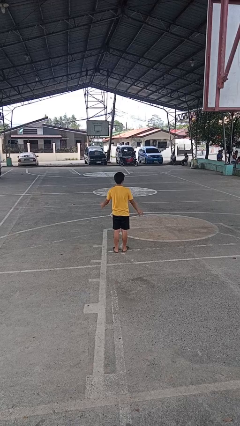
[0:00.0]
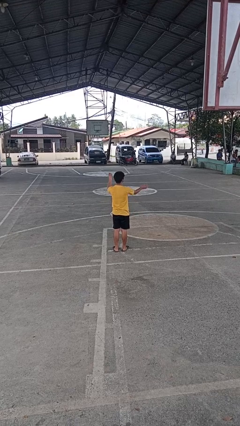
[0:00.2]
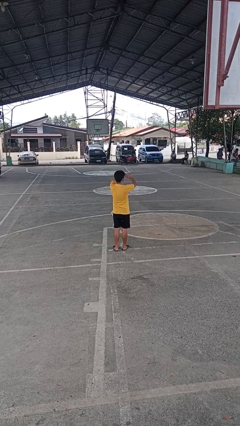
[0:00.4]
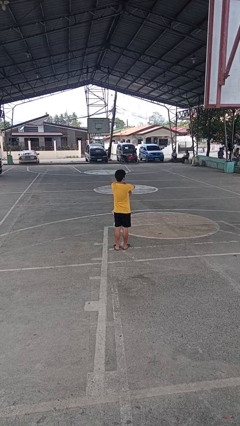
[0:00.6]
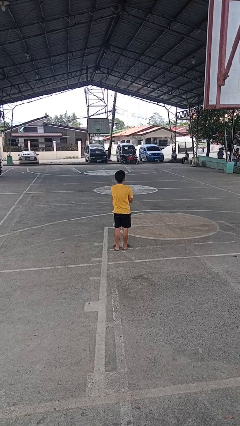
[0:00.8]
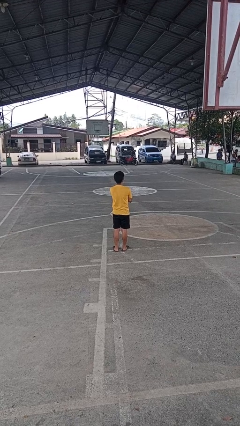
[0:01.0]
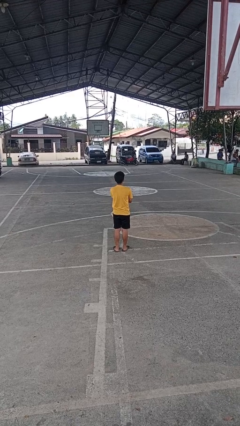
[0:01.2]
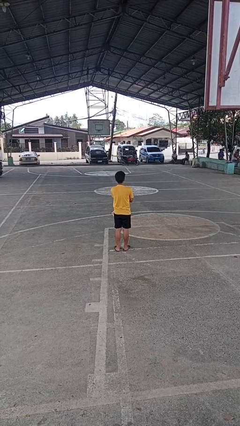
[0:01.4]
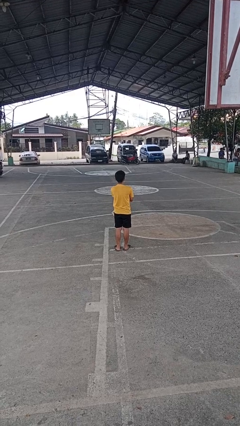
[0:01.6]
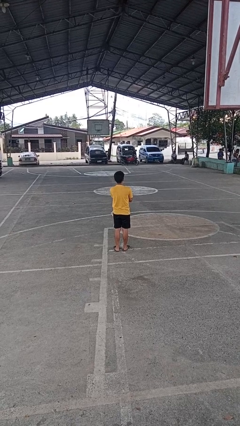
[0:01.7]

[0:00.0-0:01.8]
person crosses arms

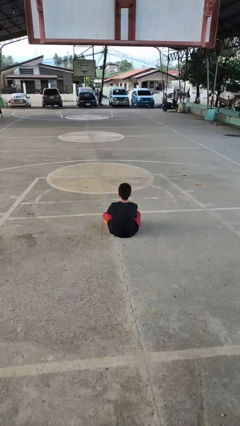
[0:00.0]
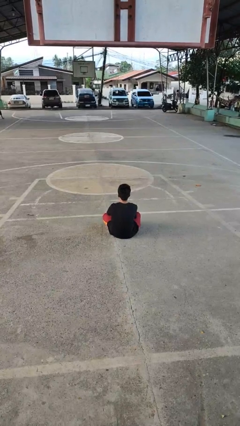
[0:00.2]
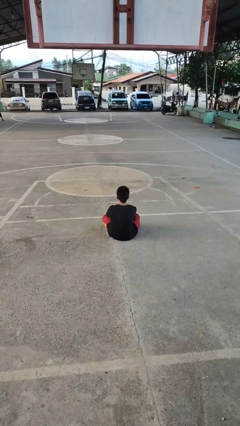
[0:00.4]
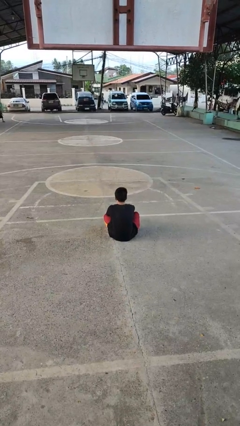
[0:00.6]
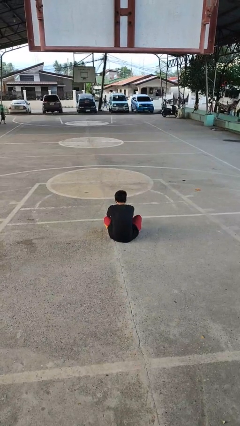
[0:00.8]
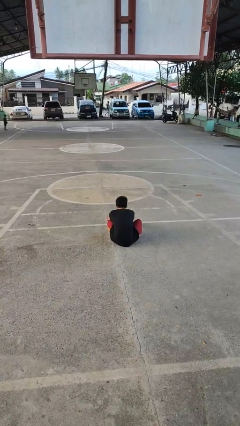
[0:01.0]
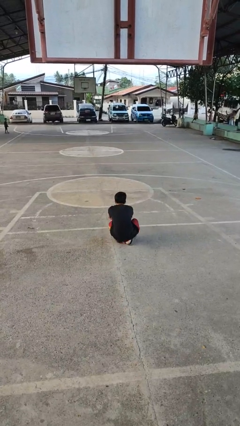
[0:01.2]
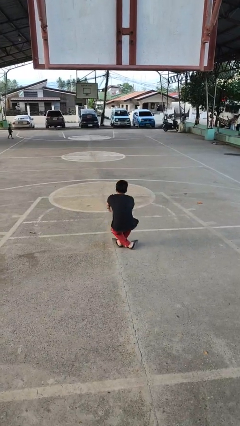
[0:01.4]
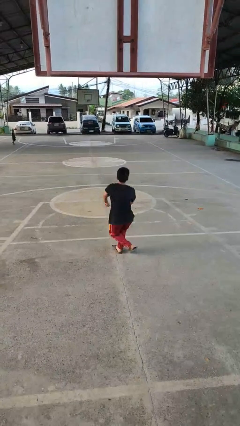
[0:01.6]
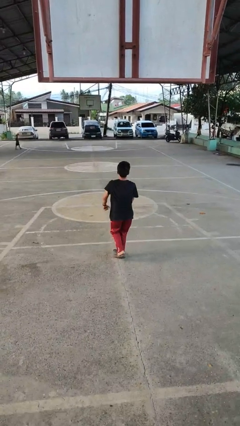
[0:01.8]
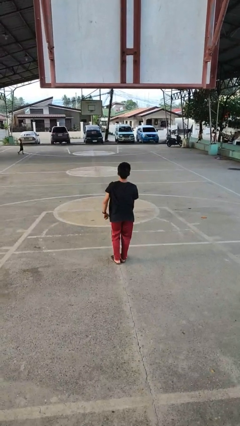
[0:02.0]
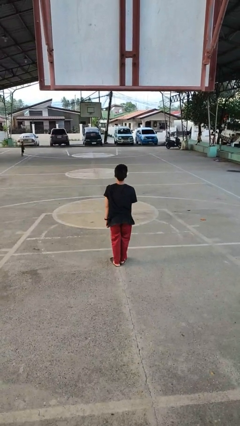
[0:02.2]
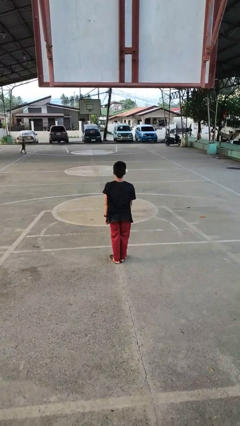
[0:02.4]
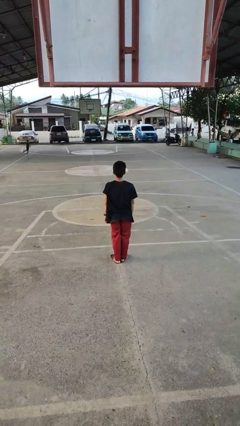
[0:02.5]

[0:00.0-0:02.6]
person stands up from floor

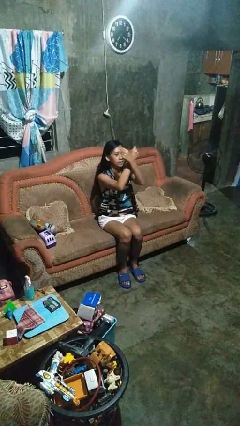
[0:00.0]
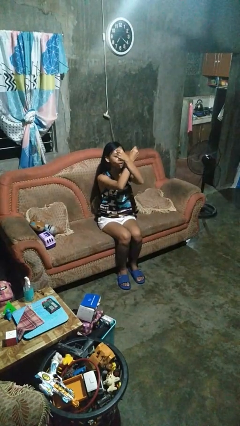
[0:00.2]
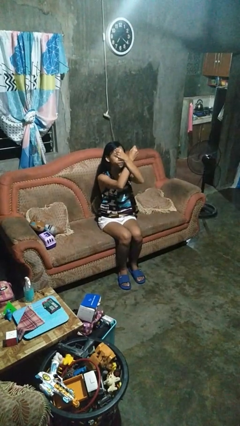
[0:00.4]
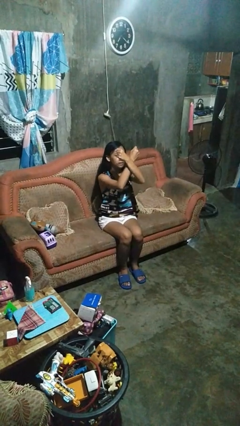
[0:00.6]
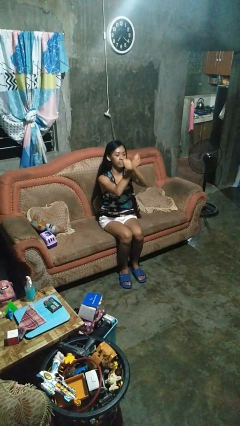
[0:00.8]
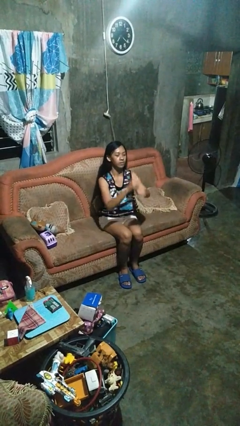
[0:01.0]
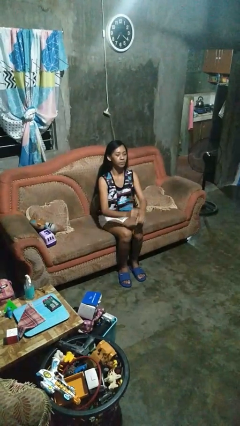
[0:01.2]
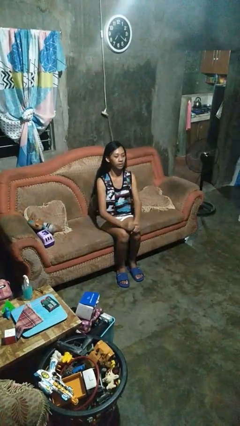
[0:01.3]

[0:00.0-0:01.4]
person gestures arms x

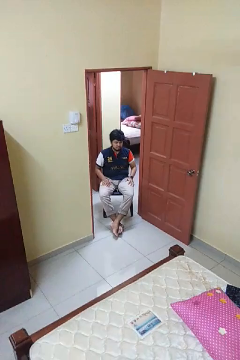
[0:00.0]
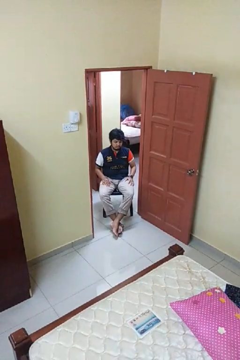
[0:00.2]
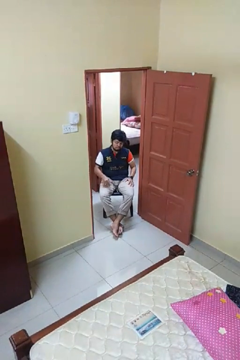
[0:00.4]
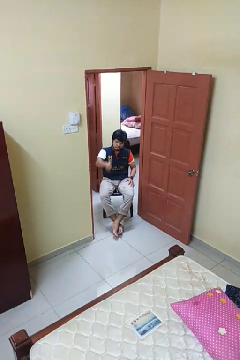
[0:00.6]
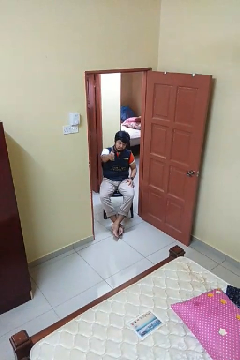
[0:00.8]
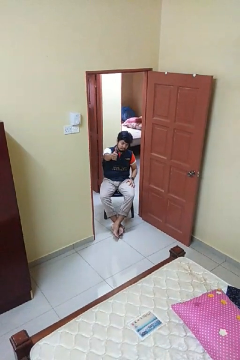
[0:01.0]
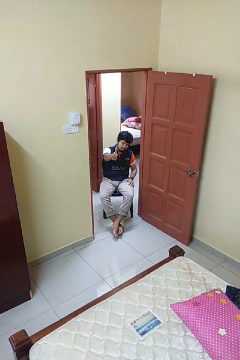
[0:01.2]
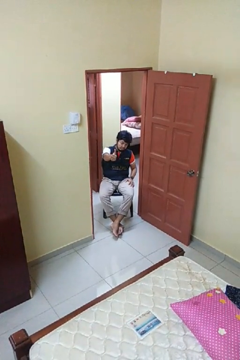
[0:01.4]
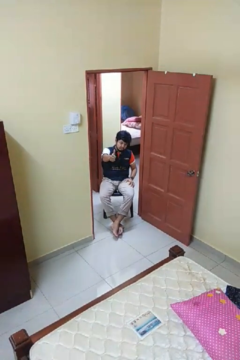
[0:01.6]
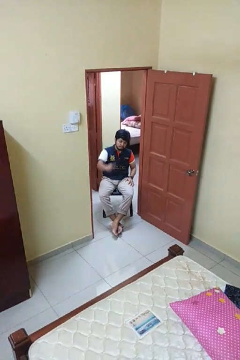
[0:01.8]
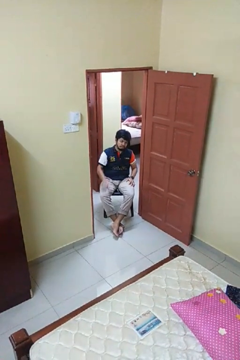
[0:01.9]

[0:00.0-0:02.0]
person gestures thumbs up

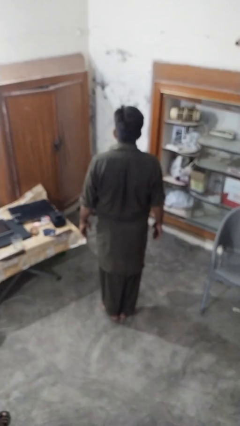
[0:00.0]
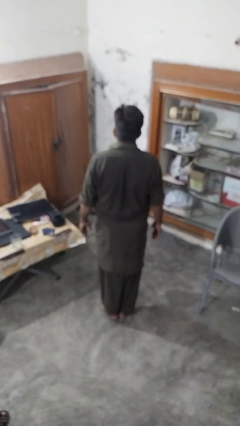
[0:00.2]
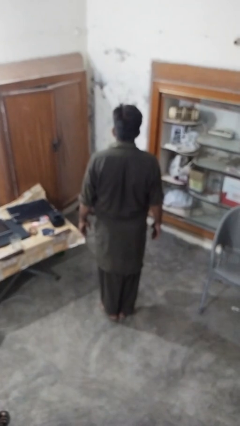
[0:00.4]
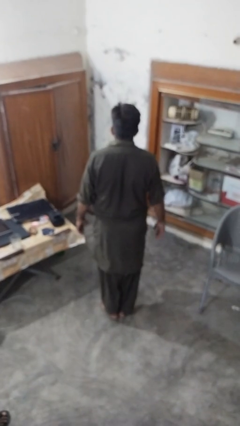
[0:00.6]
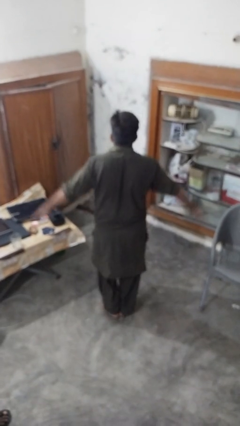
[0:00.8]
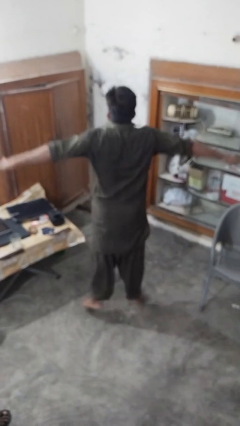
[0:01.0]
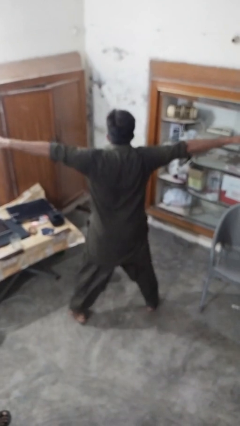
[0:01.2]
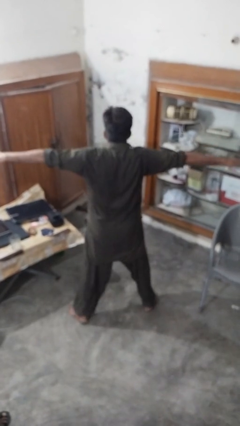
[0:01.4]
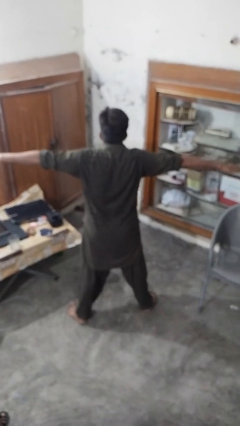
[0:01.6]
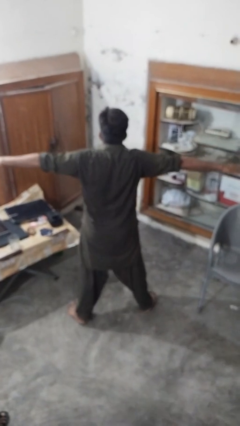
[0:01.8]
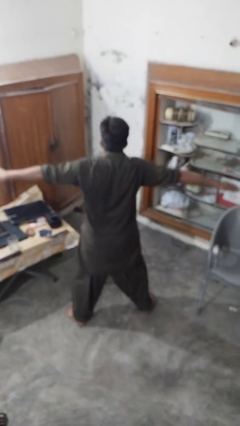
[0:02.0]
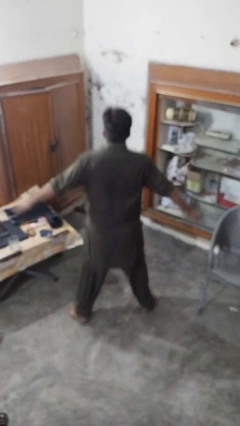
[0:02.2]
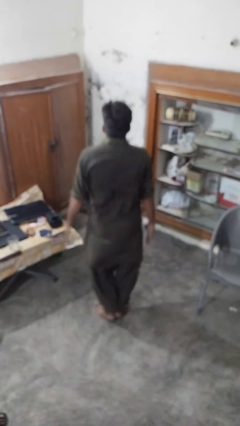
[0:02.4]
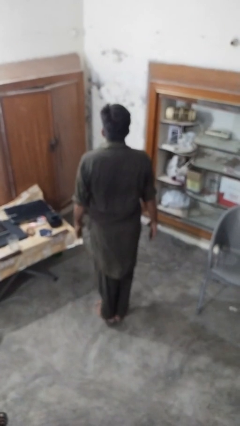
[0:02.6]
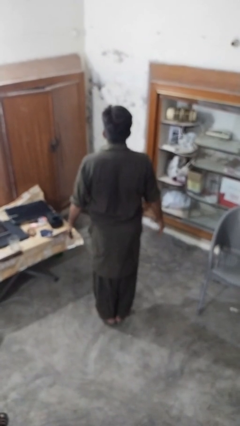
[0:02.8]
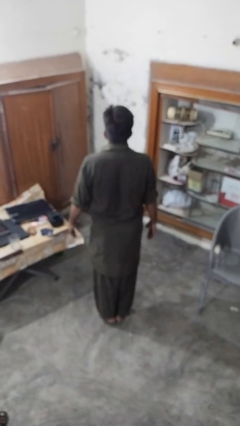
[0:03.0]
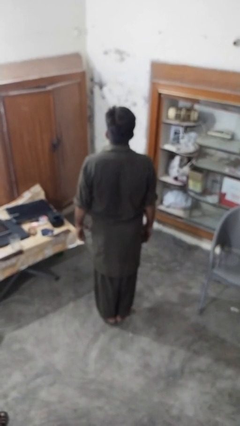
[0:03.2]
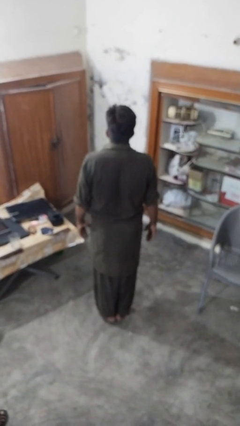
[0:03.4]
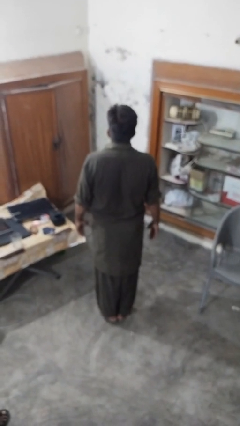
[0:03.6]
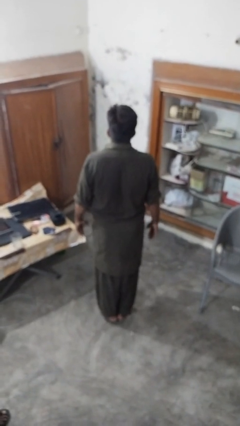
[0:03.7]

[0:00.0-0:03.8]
person exercises with jumping jacks

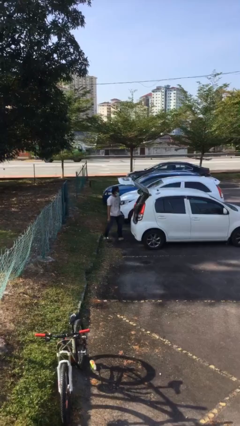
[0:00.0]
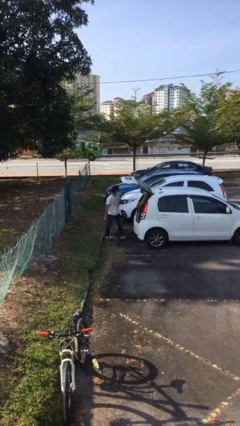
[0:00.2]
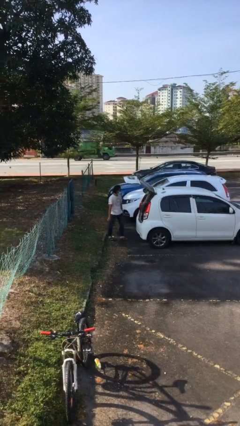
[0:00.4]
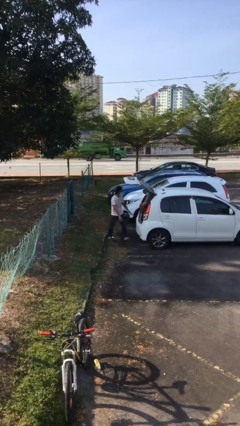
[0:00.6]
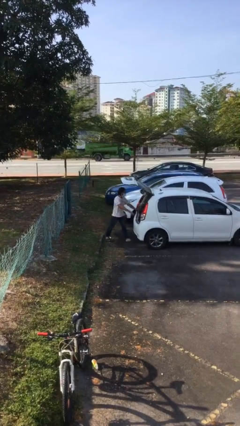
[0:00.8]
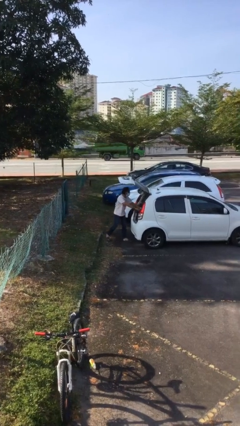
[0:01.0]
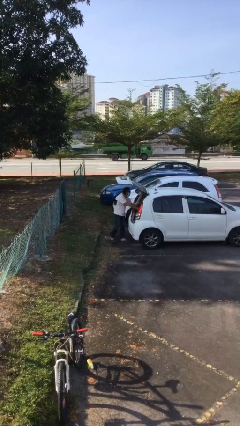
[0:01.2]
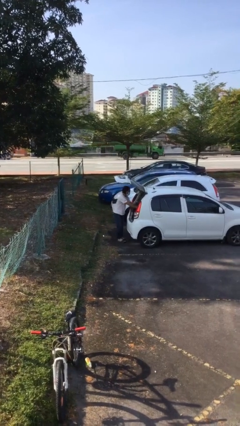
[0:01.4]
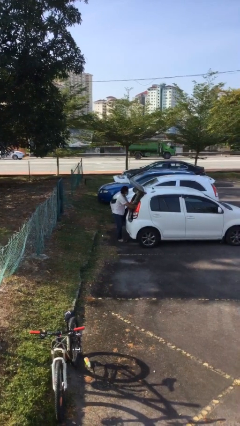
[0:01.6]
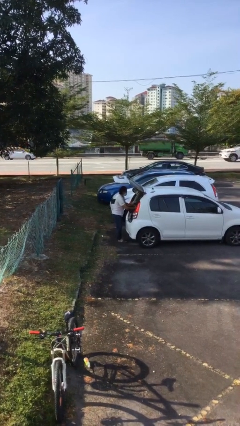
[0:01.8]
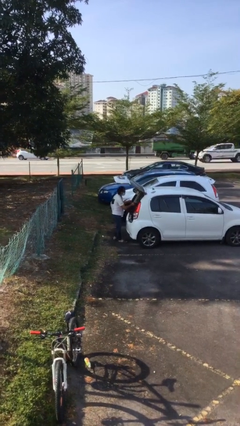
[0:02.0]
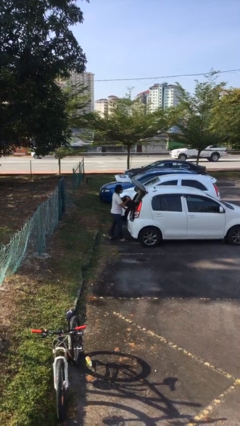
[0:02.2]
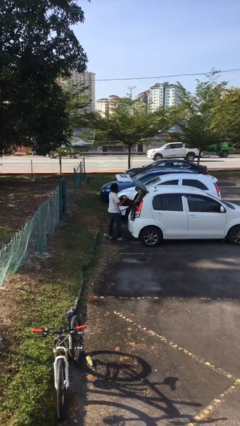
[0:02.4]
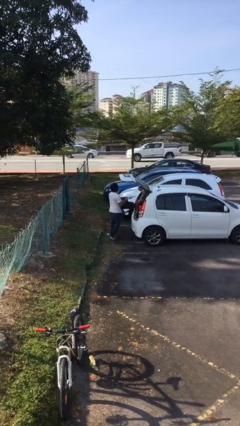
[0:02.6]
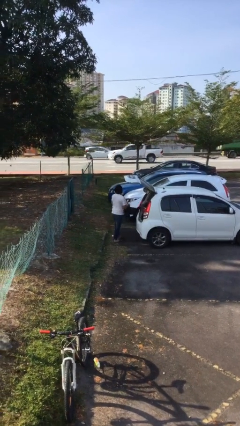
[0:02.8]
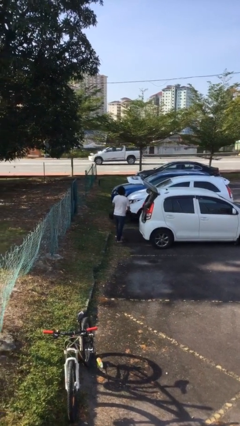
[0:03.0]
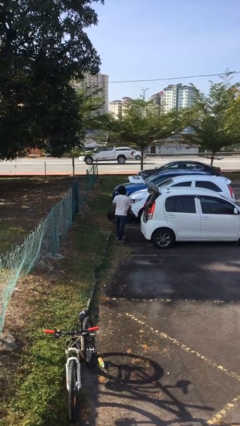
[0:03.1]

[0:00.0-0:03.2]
person unloads car

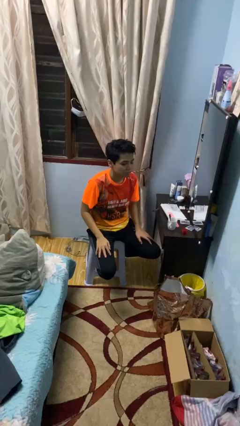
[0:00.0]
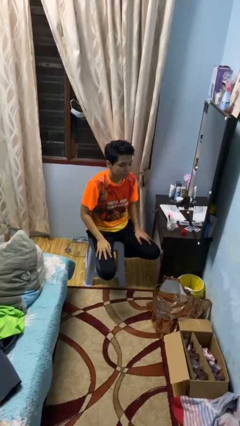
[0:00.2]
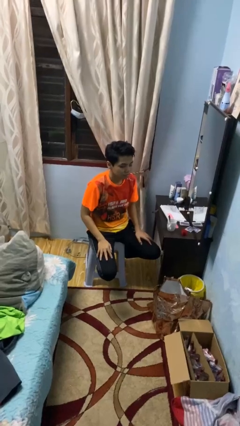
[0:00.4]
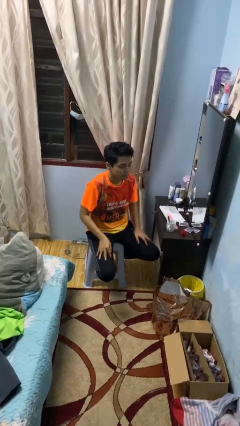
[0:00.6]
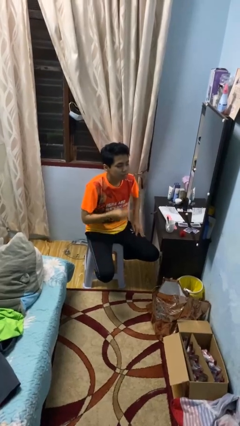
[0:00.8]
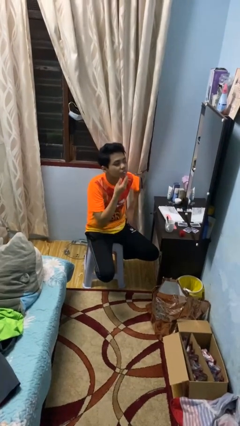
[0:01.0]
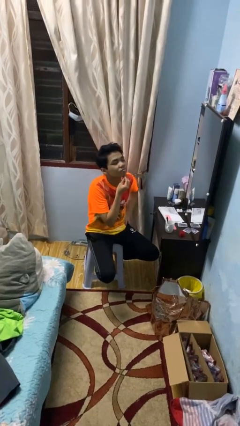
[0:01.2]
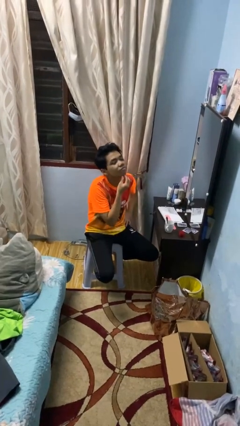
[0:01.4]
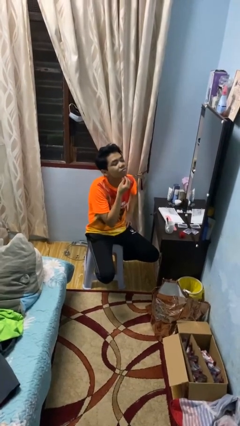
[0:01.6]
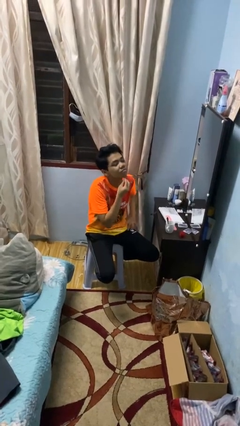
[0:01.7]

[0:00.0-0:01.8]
person strokes chin

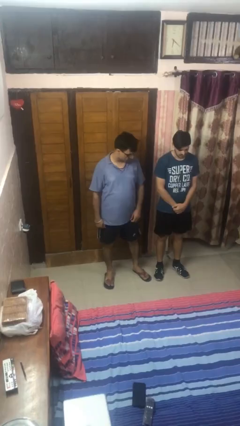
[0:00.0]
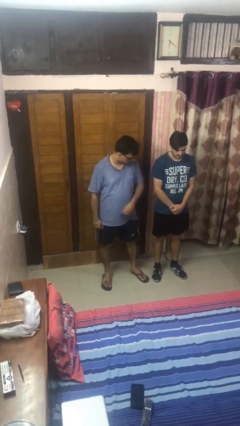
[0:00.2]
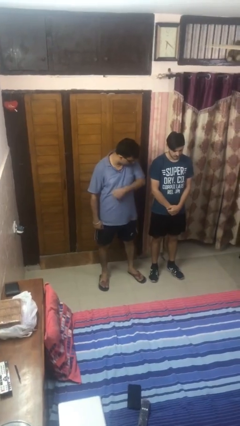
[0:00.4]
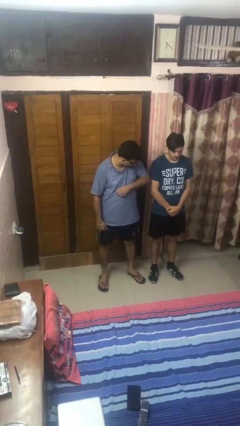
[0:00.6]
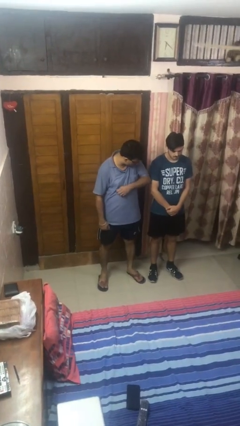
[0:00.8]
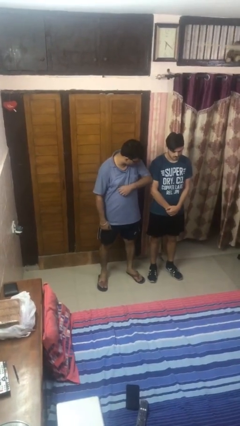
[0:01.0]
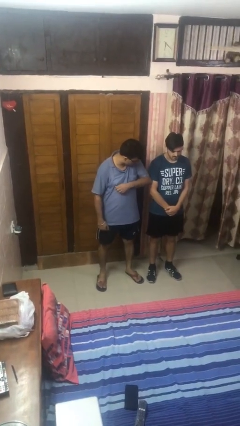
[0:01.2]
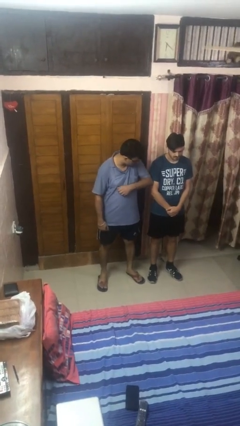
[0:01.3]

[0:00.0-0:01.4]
person nudges person with elbow
